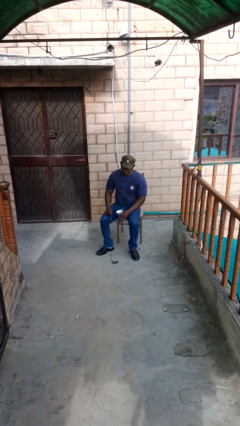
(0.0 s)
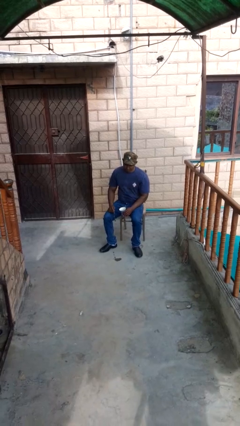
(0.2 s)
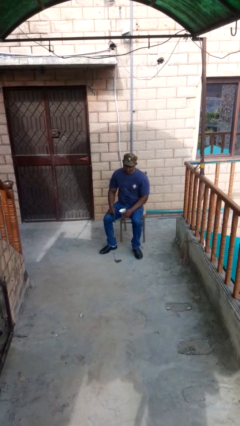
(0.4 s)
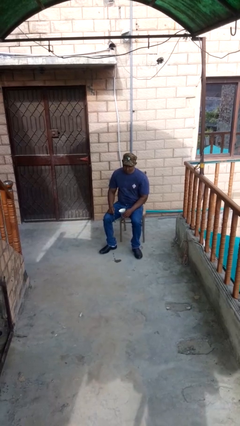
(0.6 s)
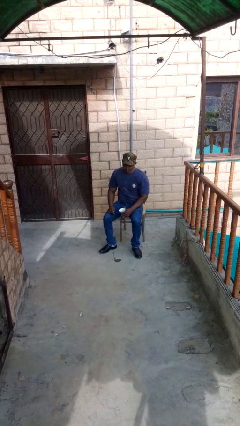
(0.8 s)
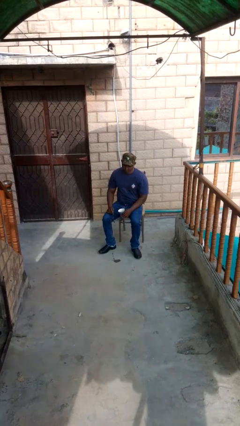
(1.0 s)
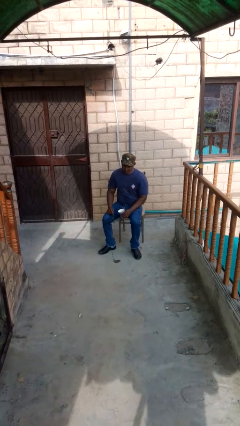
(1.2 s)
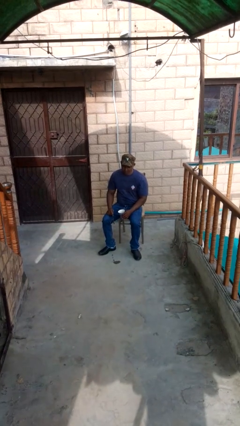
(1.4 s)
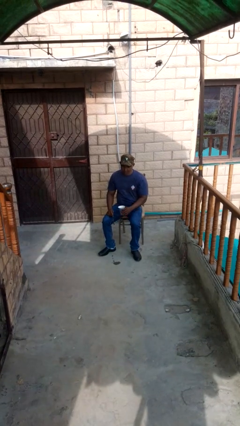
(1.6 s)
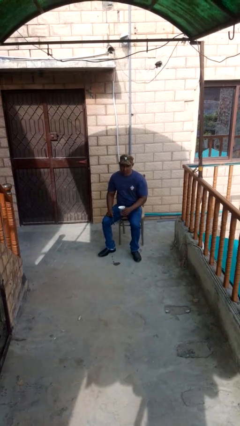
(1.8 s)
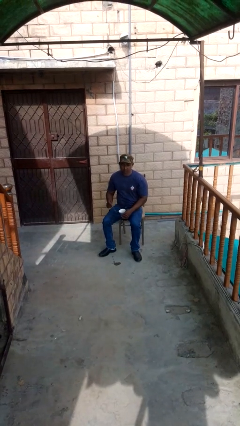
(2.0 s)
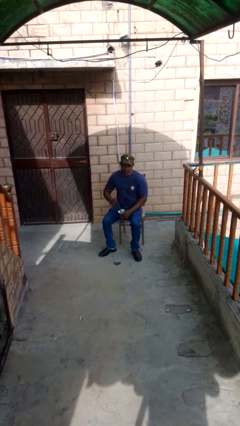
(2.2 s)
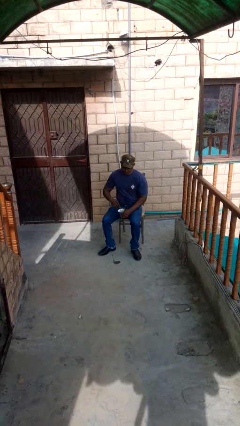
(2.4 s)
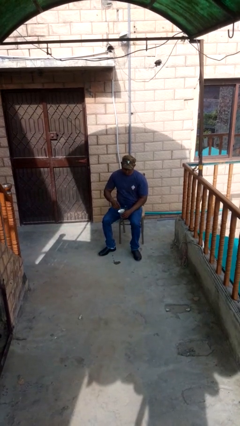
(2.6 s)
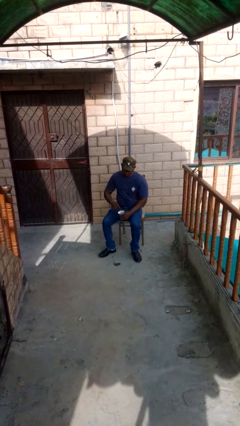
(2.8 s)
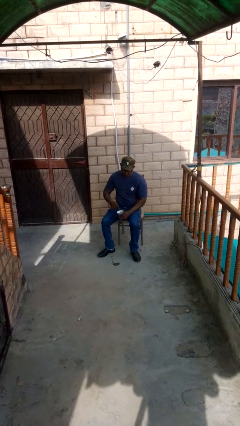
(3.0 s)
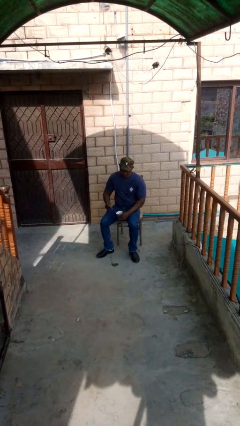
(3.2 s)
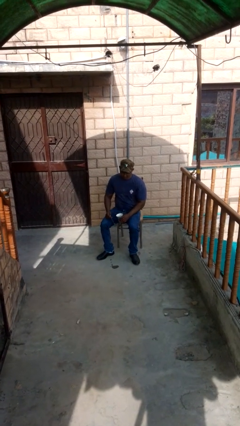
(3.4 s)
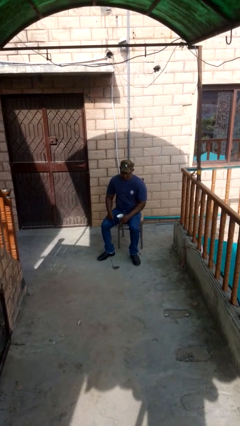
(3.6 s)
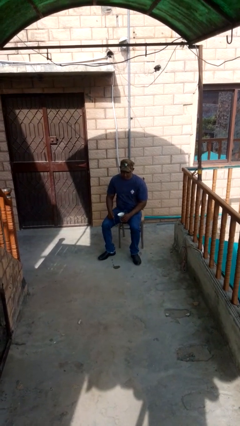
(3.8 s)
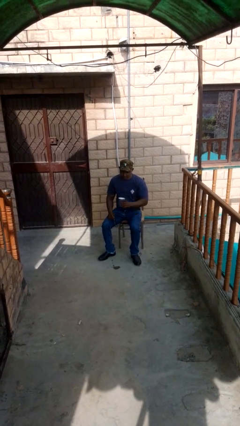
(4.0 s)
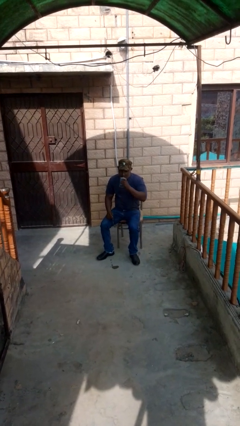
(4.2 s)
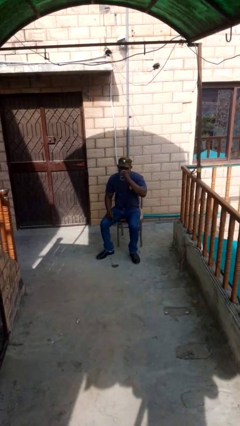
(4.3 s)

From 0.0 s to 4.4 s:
person stirs mug

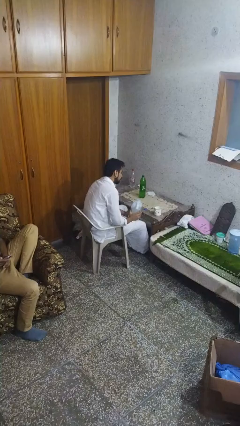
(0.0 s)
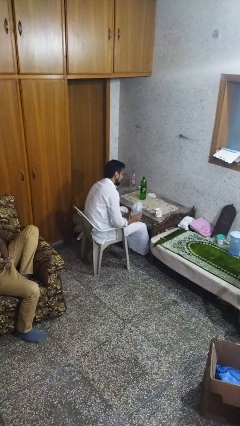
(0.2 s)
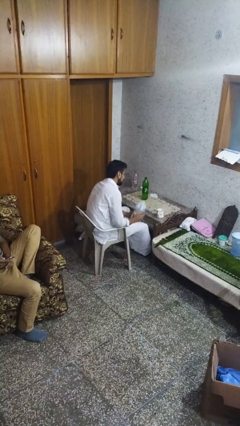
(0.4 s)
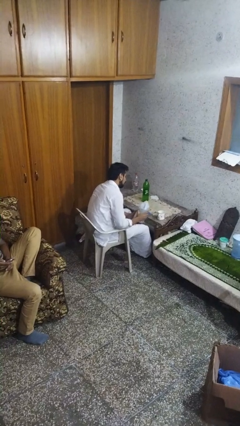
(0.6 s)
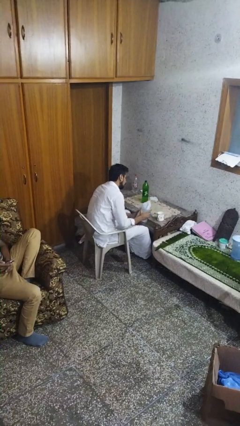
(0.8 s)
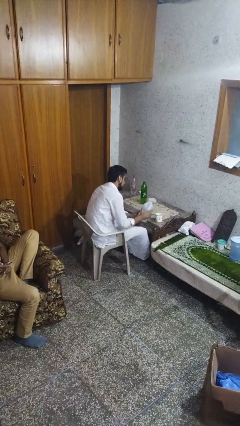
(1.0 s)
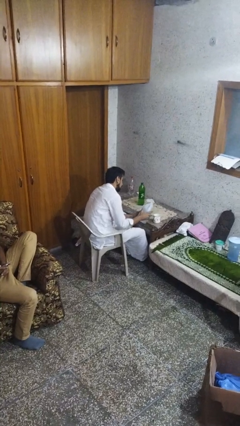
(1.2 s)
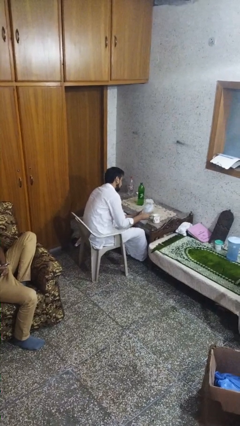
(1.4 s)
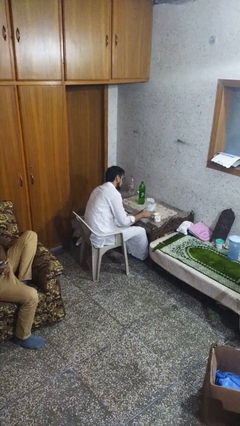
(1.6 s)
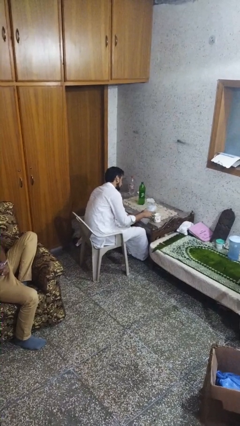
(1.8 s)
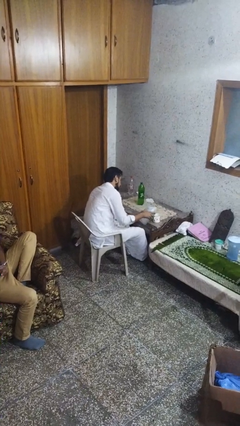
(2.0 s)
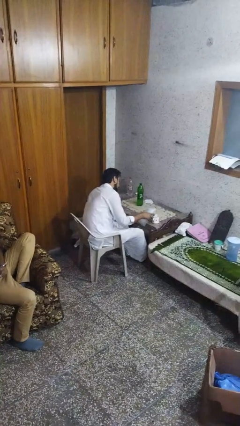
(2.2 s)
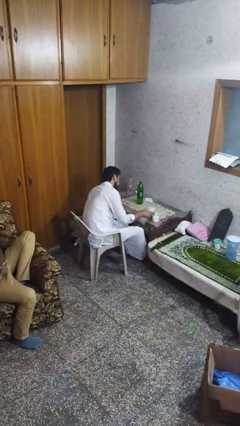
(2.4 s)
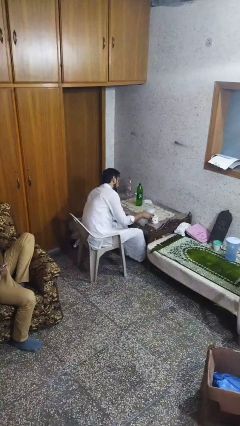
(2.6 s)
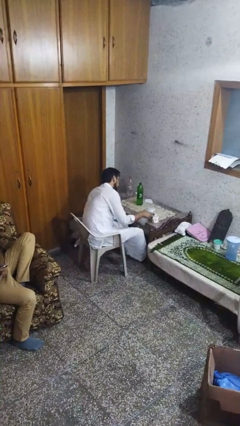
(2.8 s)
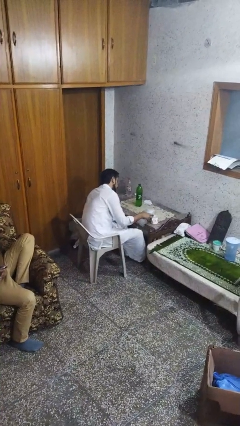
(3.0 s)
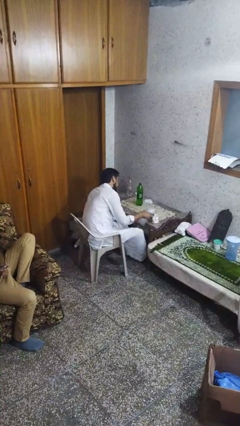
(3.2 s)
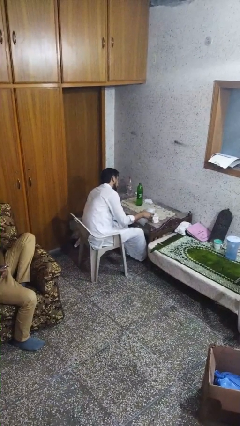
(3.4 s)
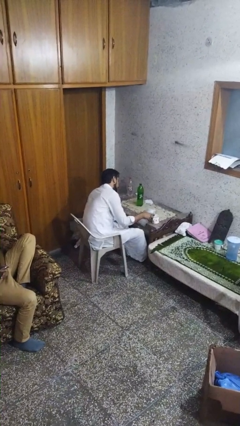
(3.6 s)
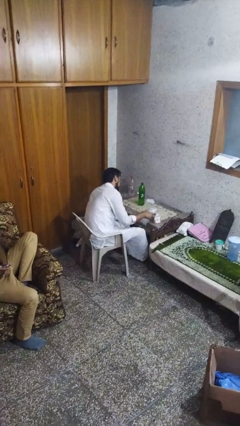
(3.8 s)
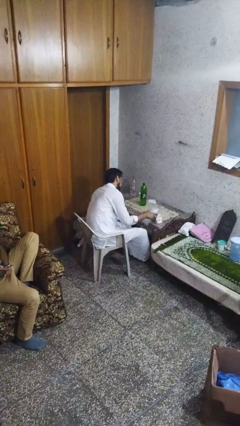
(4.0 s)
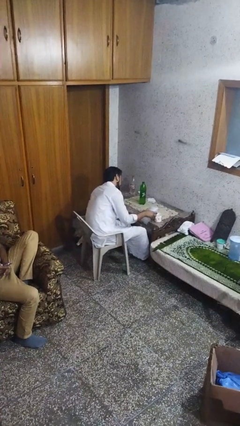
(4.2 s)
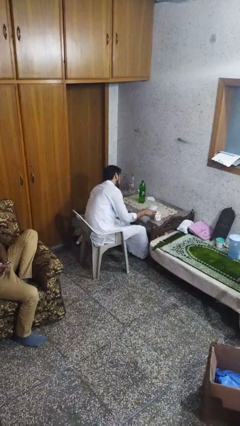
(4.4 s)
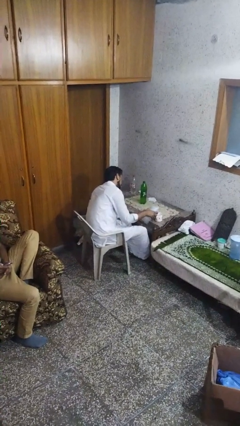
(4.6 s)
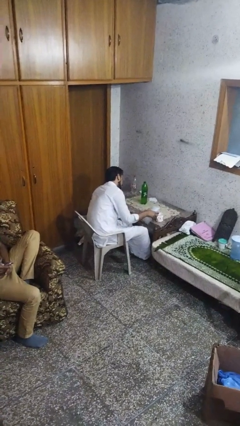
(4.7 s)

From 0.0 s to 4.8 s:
person pours liquid into cup

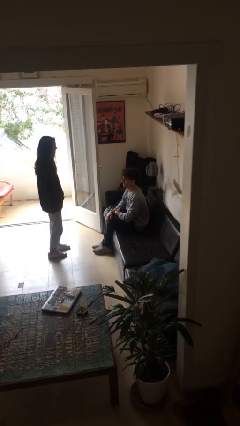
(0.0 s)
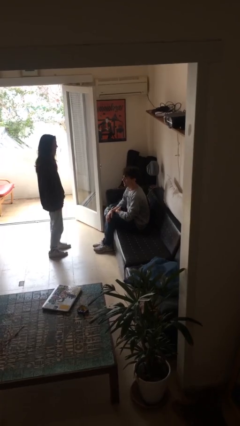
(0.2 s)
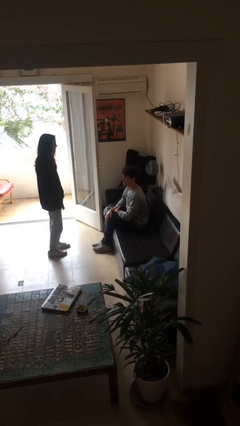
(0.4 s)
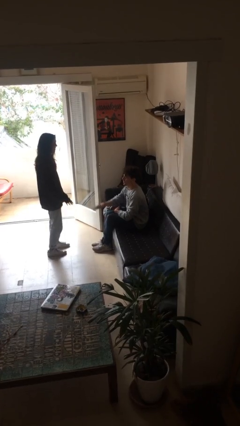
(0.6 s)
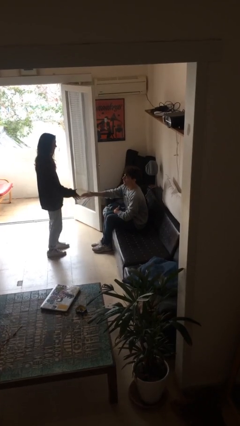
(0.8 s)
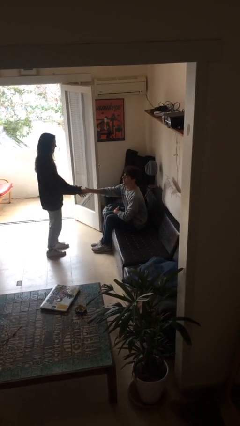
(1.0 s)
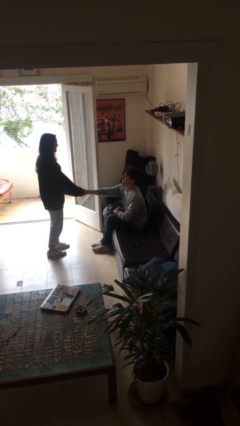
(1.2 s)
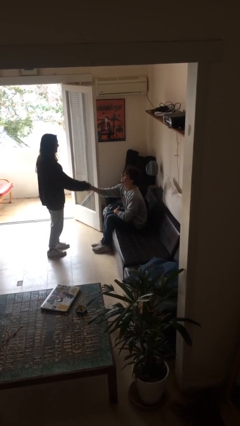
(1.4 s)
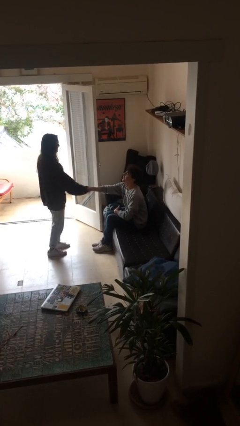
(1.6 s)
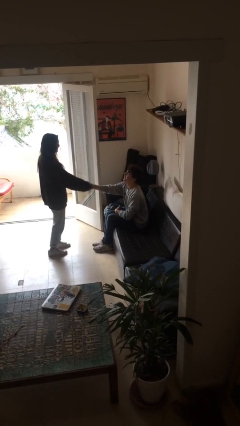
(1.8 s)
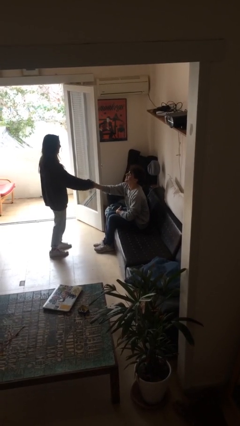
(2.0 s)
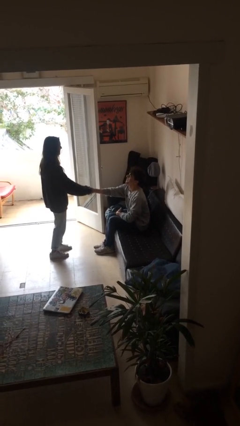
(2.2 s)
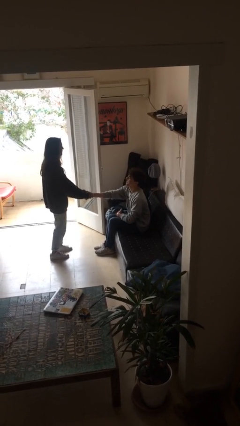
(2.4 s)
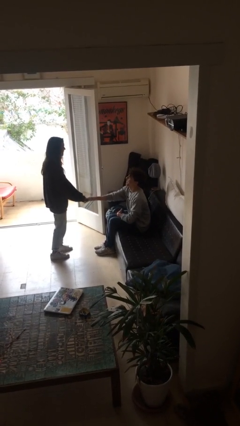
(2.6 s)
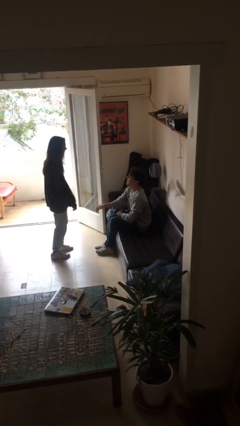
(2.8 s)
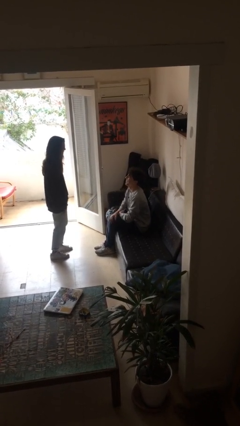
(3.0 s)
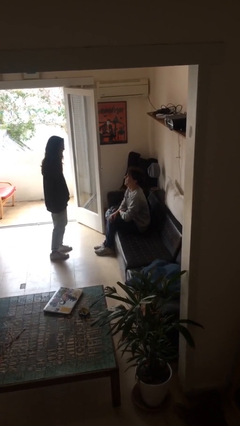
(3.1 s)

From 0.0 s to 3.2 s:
person shakes hand

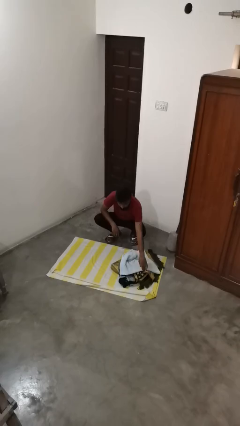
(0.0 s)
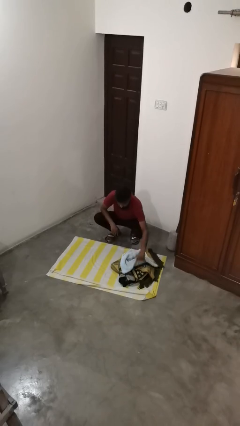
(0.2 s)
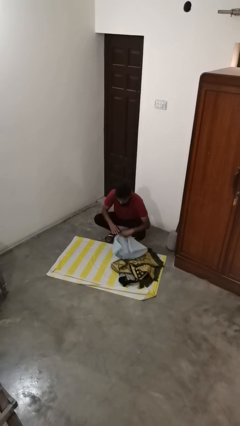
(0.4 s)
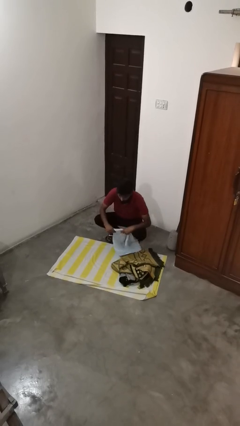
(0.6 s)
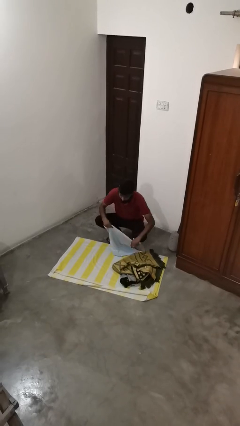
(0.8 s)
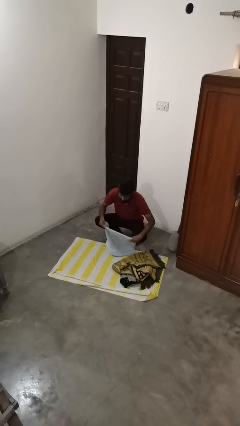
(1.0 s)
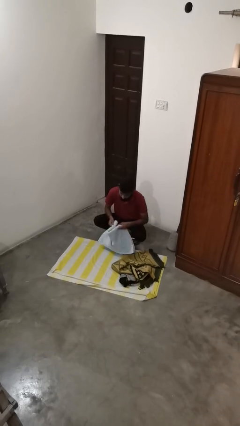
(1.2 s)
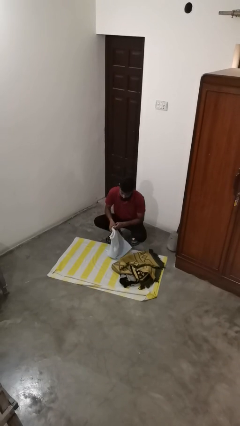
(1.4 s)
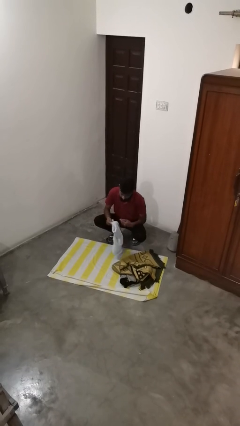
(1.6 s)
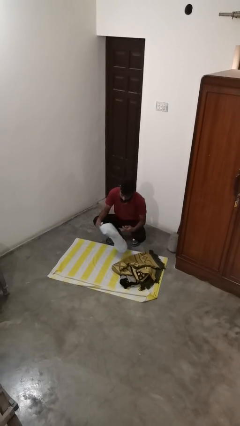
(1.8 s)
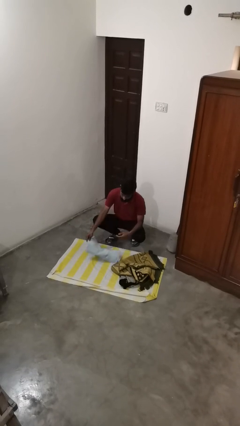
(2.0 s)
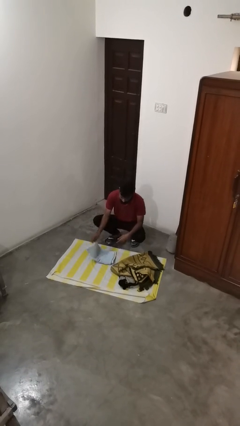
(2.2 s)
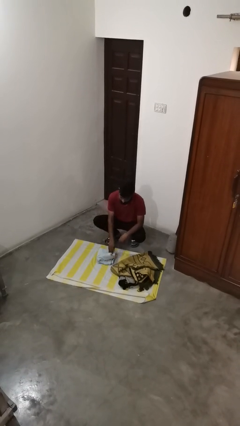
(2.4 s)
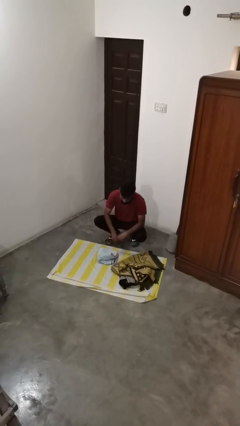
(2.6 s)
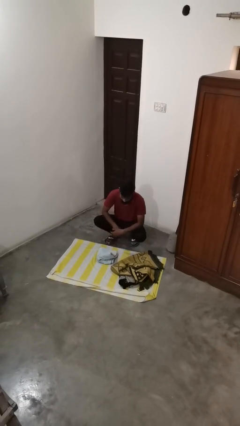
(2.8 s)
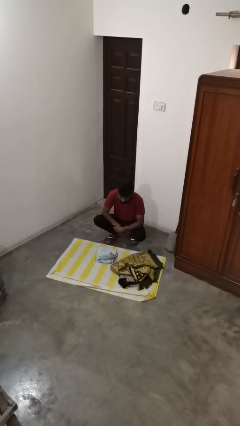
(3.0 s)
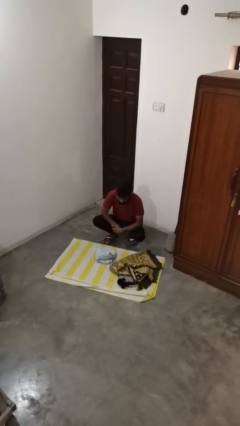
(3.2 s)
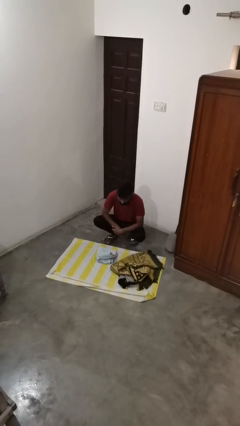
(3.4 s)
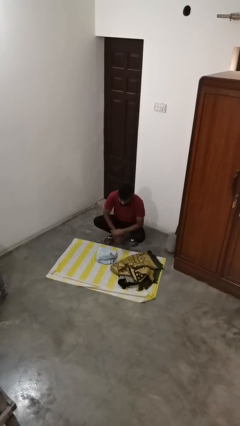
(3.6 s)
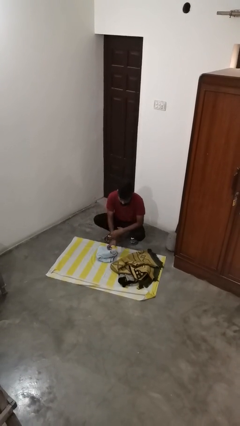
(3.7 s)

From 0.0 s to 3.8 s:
person folds towel

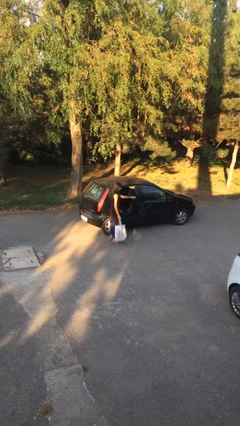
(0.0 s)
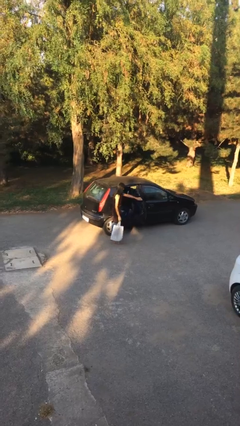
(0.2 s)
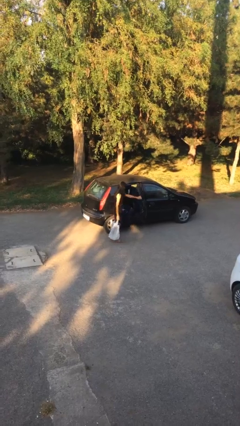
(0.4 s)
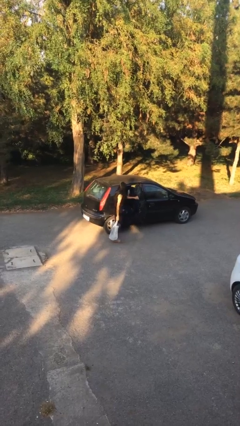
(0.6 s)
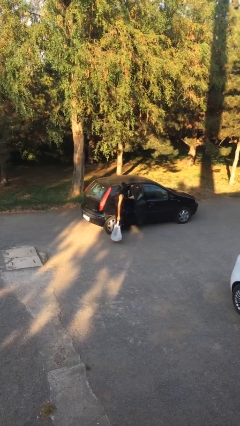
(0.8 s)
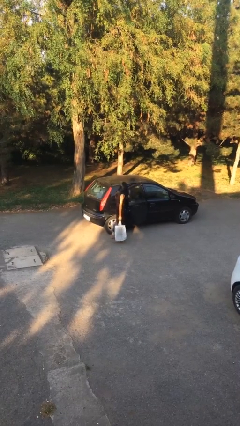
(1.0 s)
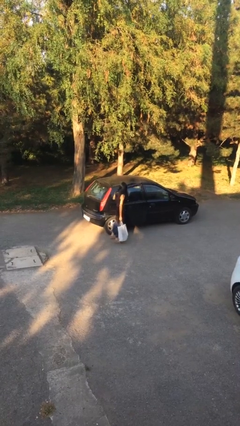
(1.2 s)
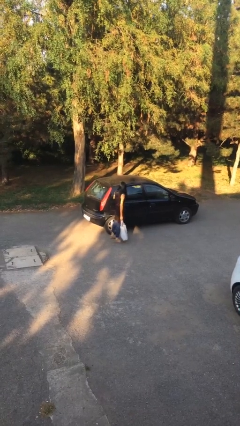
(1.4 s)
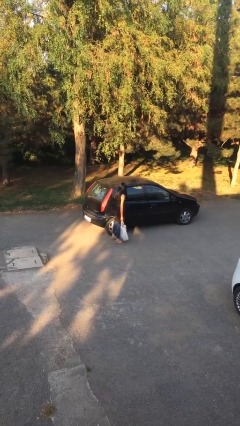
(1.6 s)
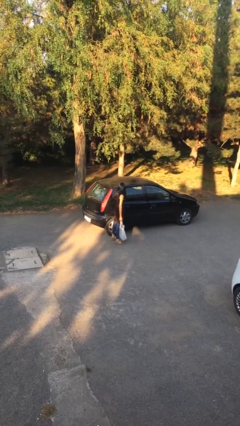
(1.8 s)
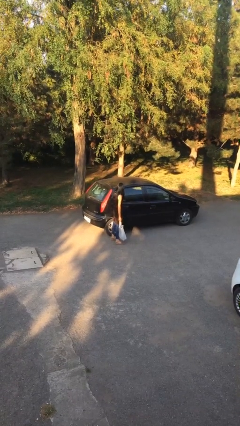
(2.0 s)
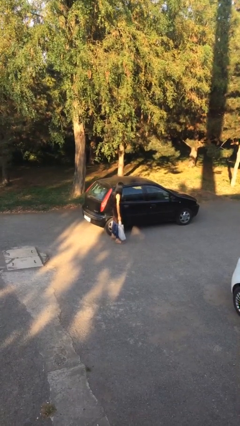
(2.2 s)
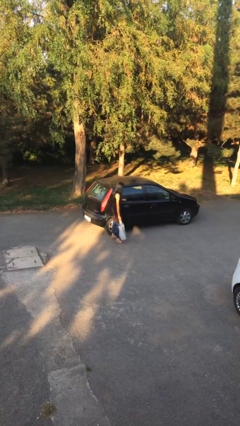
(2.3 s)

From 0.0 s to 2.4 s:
person closes car door
